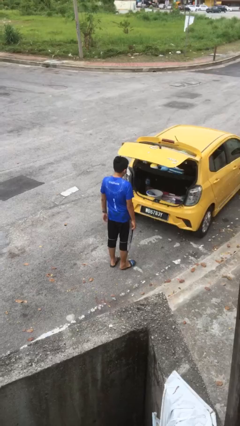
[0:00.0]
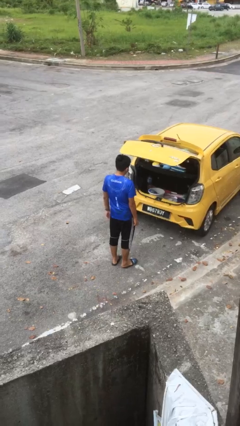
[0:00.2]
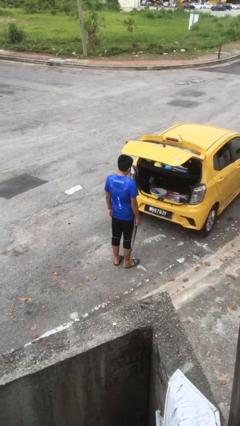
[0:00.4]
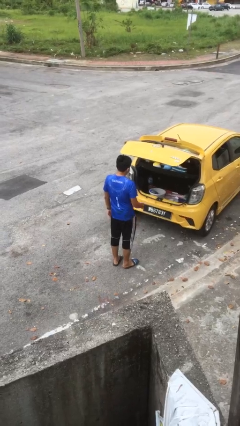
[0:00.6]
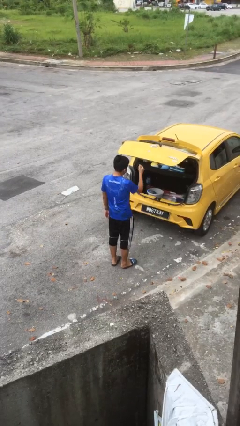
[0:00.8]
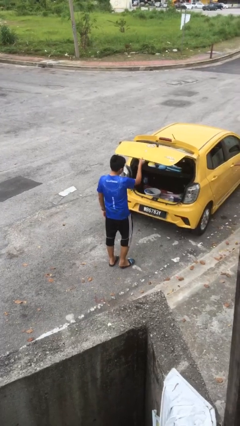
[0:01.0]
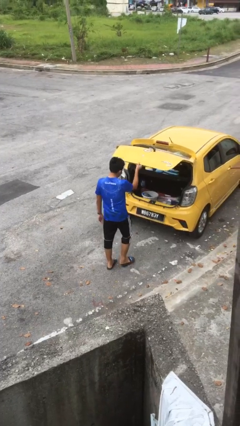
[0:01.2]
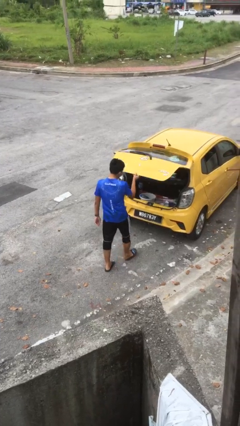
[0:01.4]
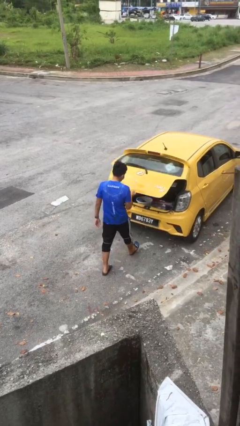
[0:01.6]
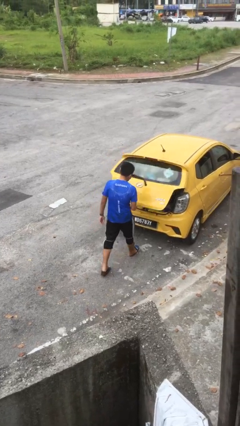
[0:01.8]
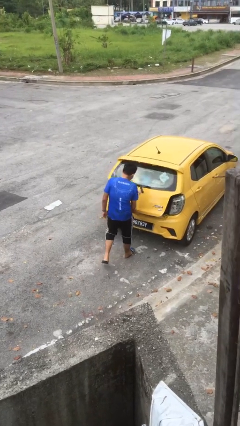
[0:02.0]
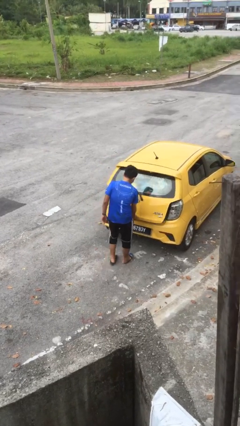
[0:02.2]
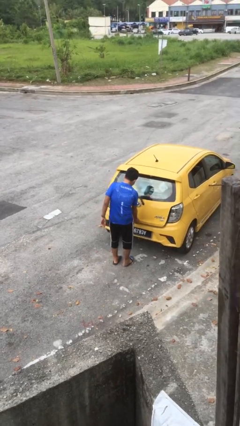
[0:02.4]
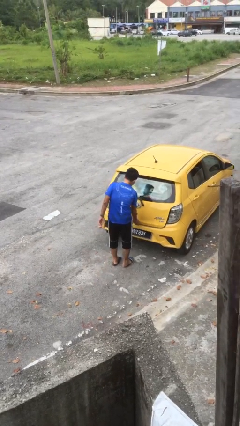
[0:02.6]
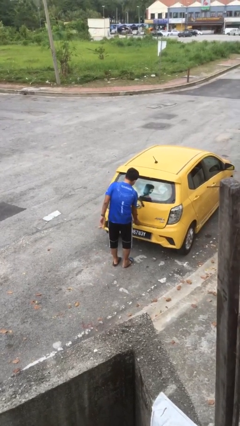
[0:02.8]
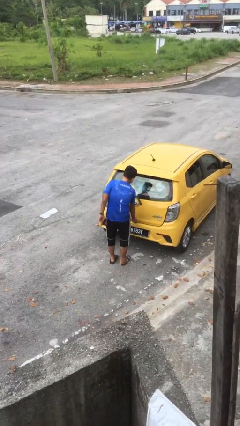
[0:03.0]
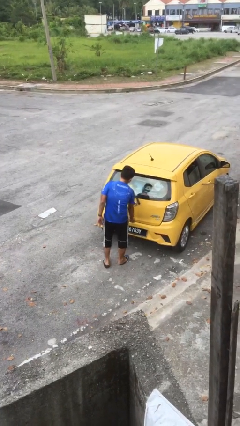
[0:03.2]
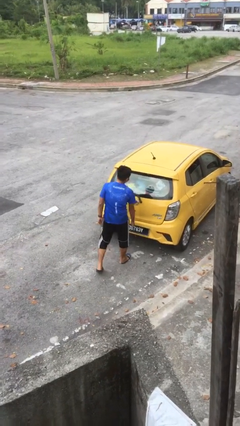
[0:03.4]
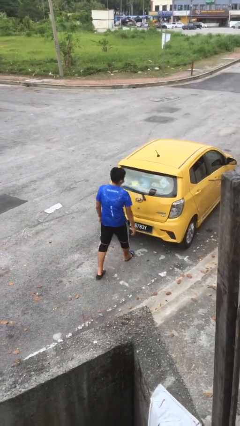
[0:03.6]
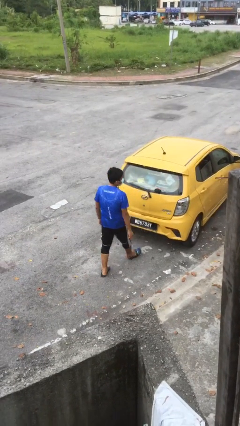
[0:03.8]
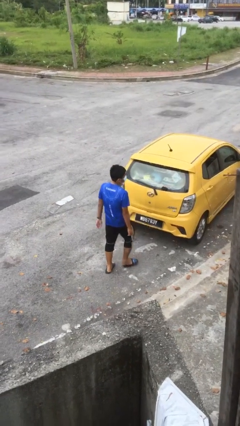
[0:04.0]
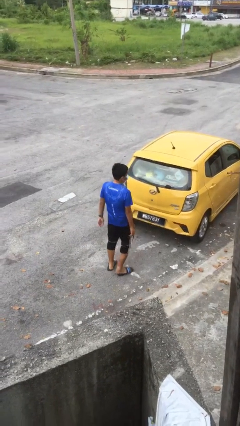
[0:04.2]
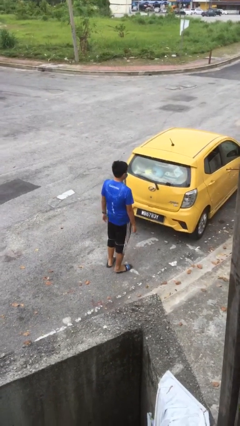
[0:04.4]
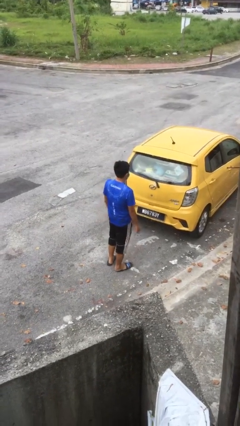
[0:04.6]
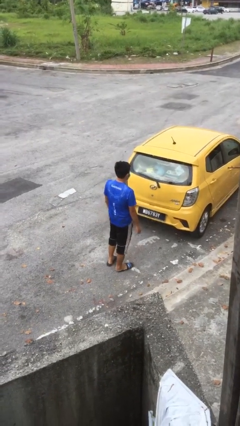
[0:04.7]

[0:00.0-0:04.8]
person closes car trunk

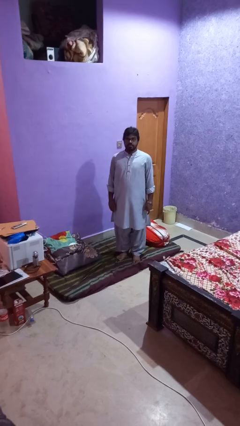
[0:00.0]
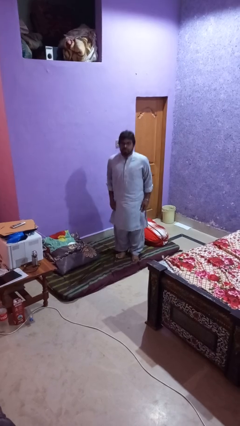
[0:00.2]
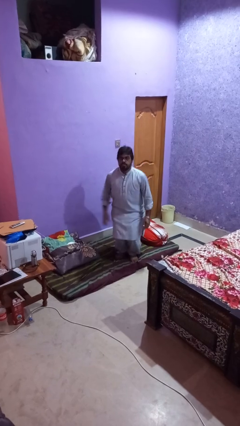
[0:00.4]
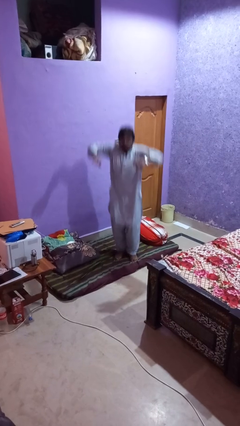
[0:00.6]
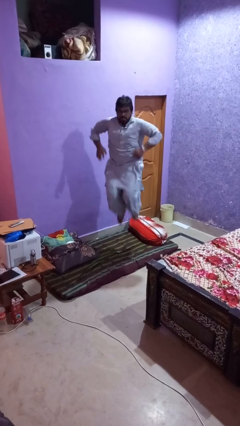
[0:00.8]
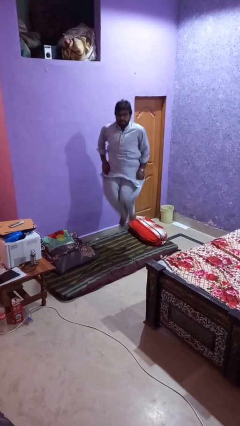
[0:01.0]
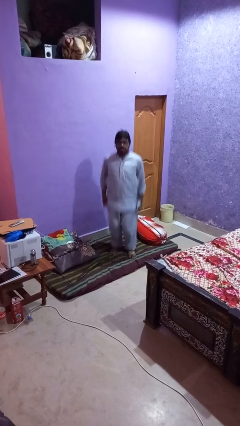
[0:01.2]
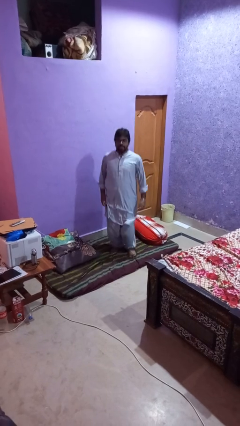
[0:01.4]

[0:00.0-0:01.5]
person jumps

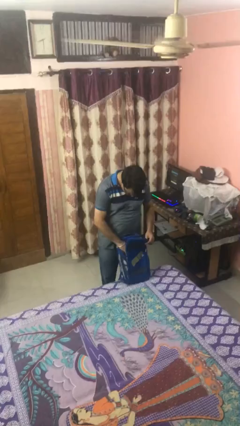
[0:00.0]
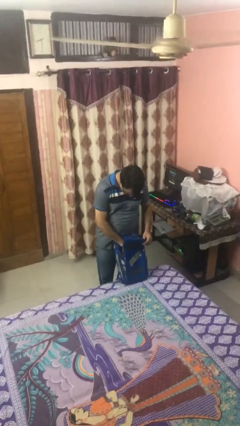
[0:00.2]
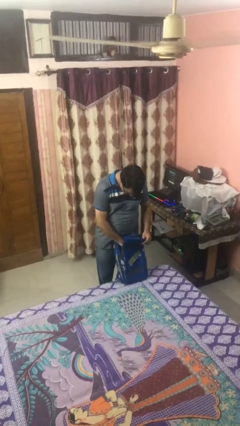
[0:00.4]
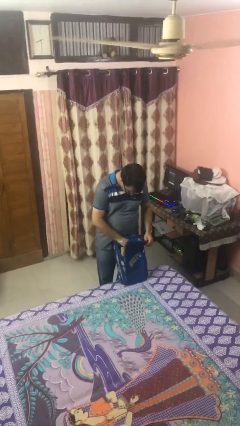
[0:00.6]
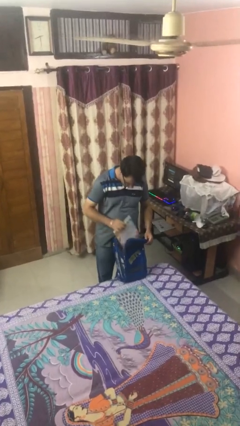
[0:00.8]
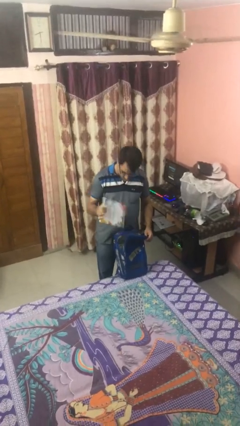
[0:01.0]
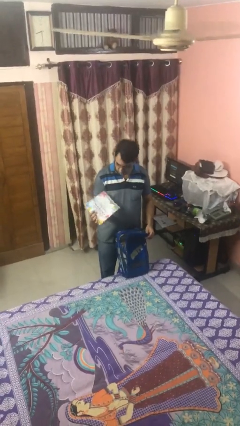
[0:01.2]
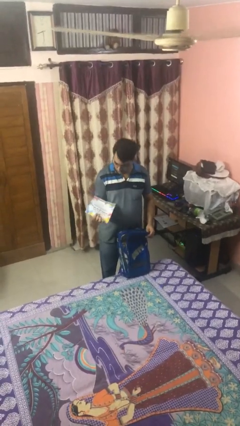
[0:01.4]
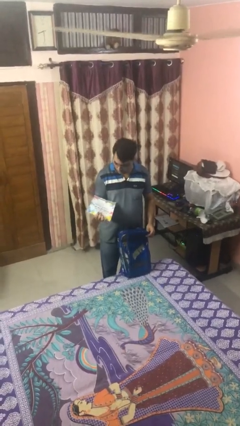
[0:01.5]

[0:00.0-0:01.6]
person takes object from backpack

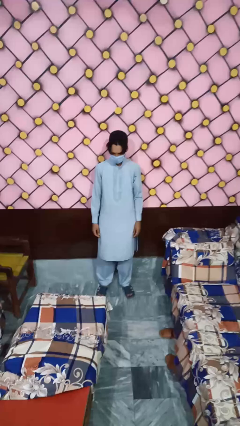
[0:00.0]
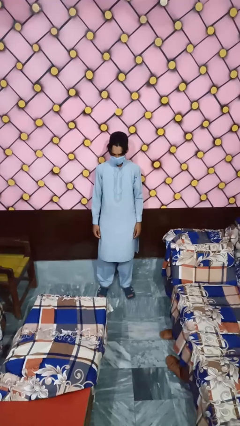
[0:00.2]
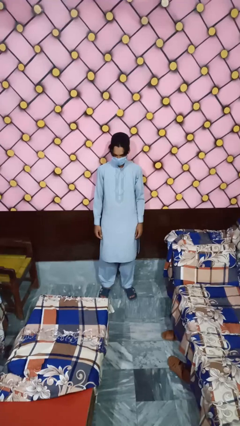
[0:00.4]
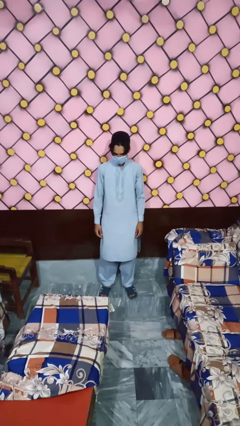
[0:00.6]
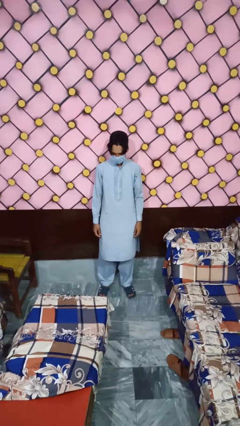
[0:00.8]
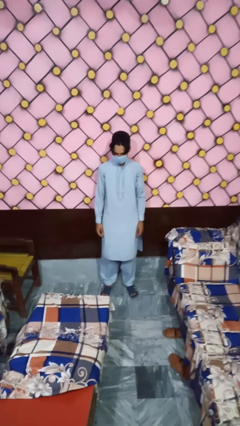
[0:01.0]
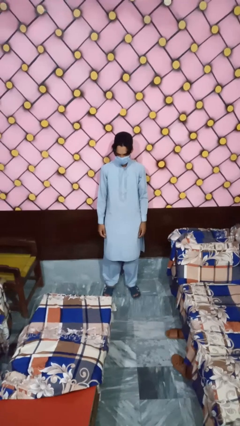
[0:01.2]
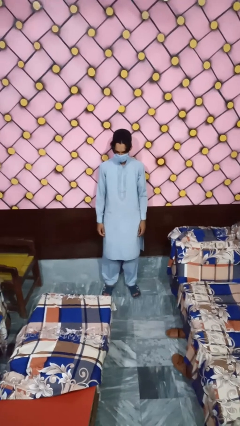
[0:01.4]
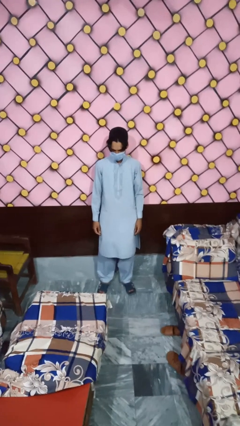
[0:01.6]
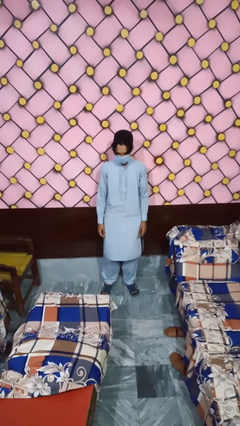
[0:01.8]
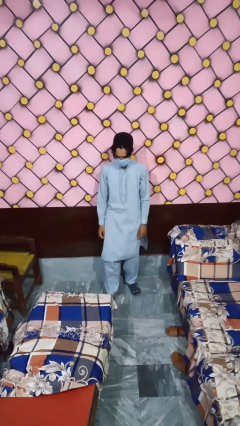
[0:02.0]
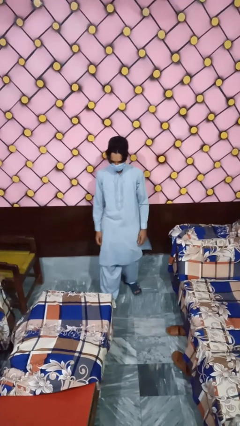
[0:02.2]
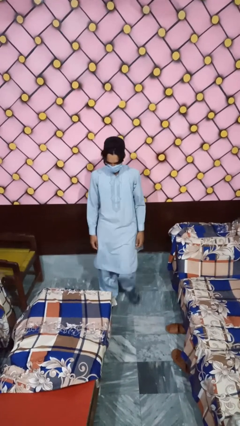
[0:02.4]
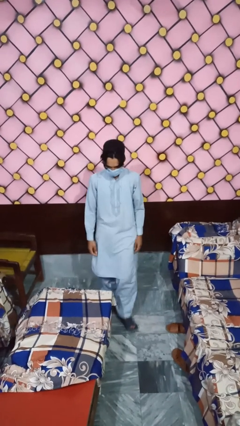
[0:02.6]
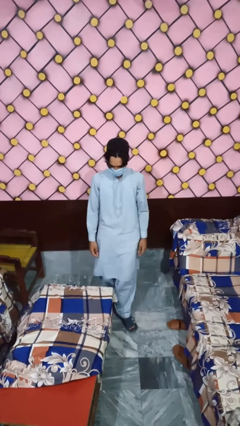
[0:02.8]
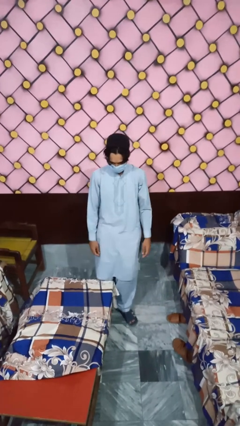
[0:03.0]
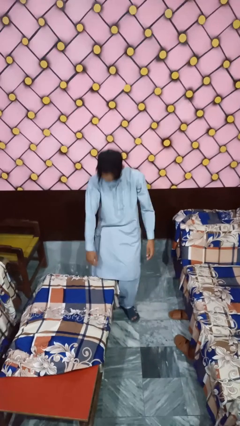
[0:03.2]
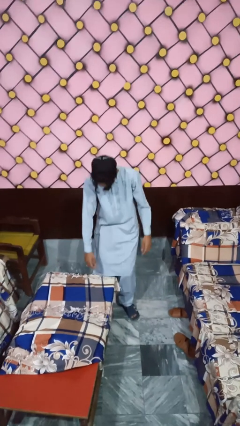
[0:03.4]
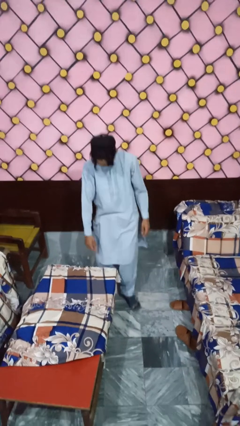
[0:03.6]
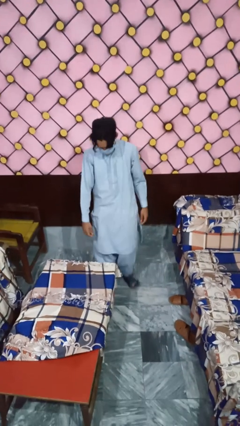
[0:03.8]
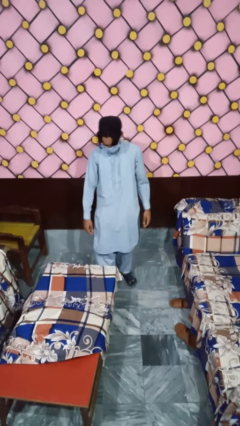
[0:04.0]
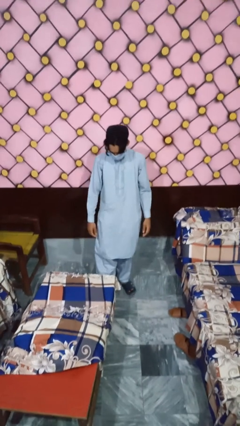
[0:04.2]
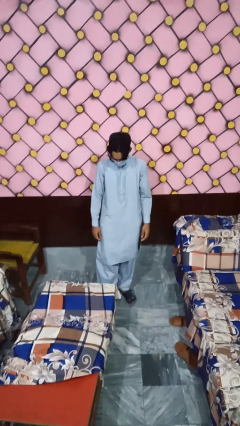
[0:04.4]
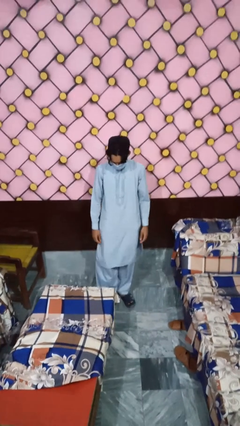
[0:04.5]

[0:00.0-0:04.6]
person bumps into table

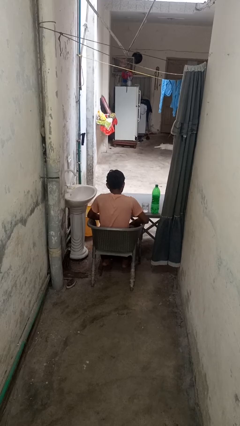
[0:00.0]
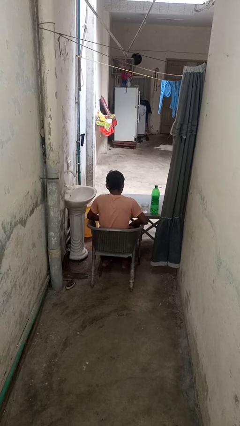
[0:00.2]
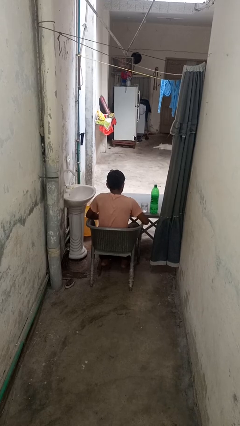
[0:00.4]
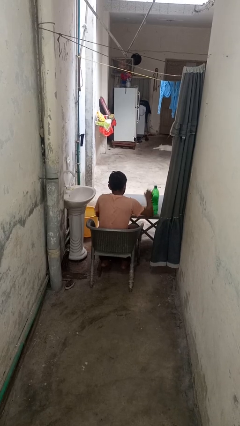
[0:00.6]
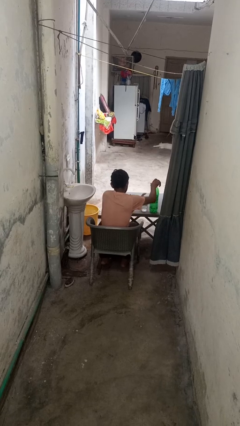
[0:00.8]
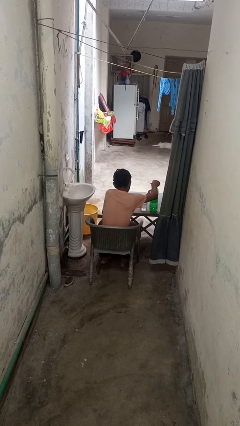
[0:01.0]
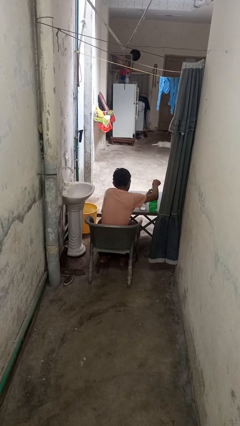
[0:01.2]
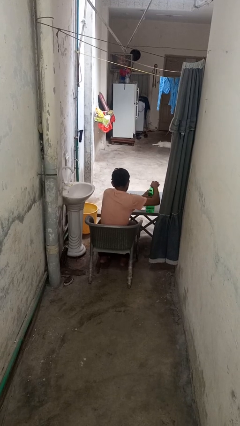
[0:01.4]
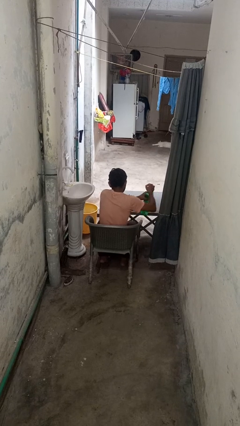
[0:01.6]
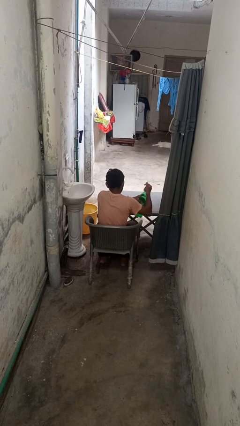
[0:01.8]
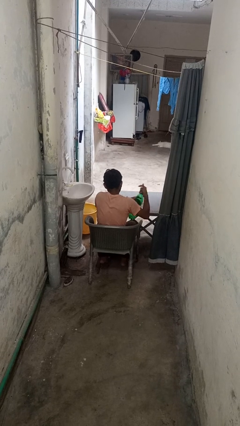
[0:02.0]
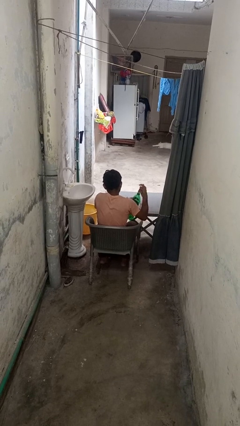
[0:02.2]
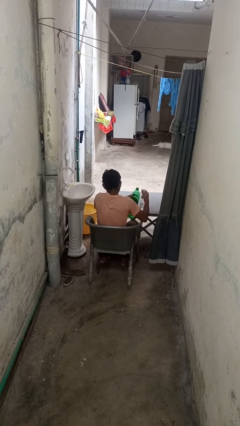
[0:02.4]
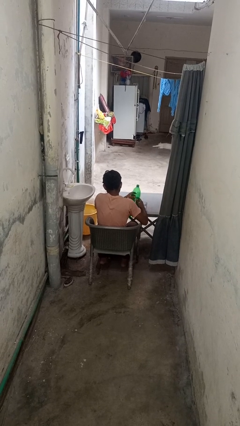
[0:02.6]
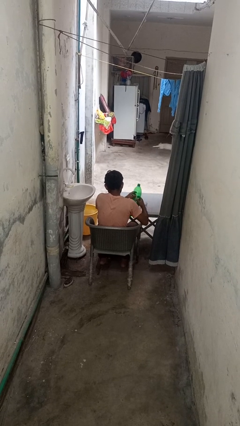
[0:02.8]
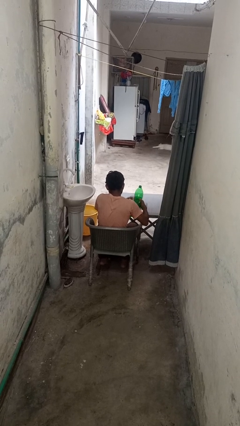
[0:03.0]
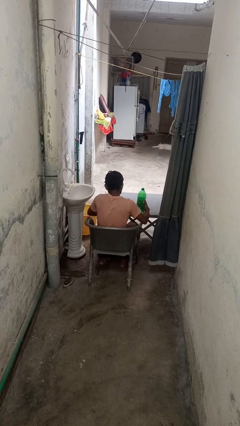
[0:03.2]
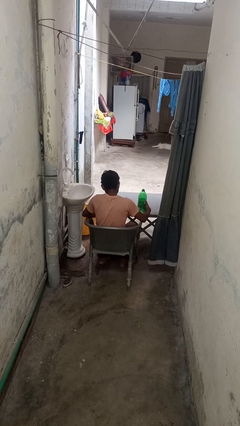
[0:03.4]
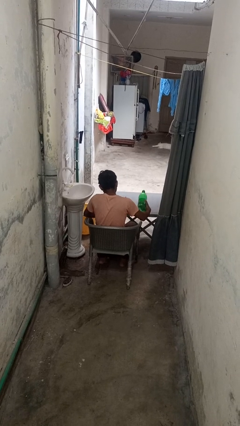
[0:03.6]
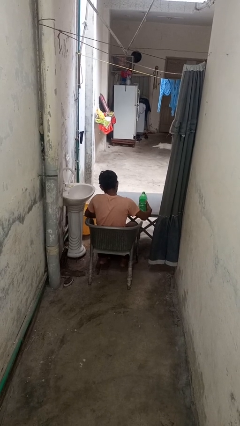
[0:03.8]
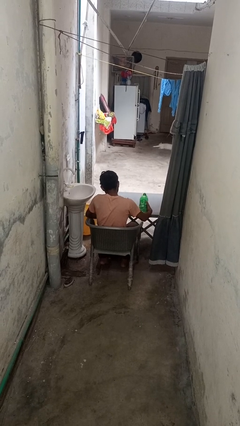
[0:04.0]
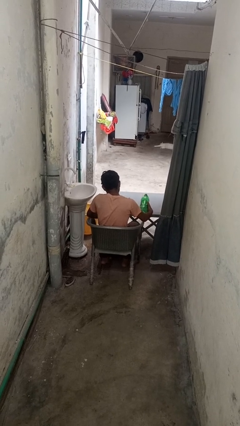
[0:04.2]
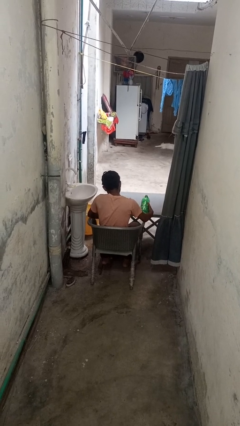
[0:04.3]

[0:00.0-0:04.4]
person unscrews lid from bottle

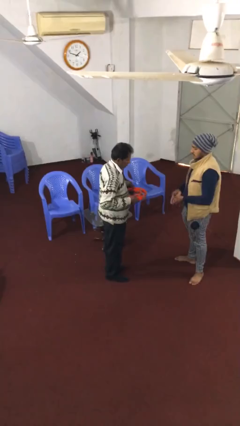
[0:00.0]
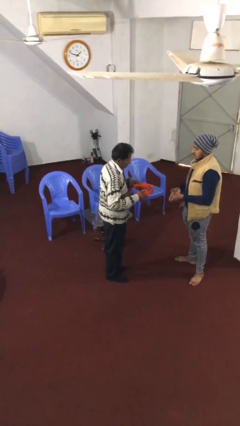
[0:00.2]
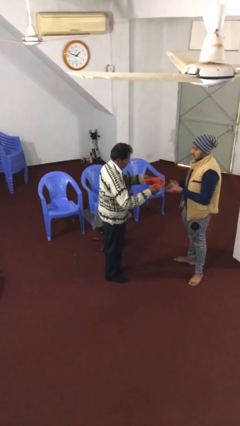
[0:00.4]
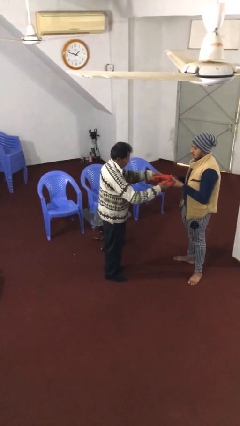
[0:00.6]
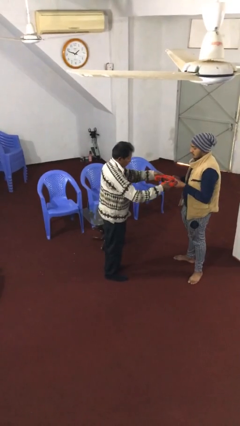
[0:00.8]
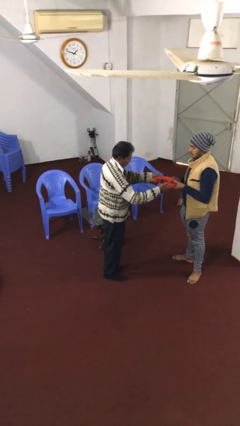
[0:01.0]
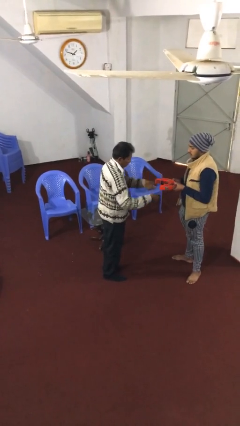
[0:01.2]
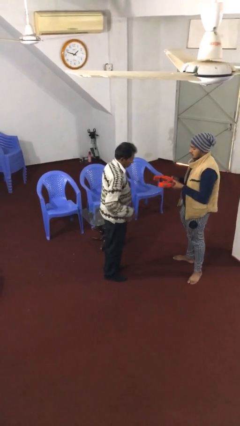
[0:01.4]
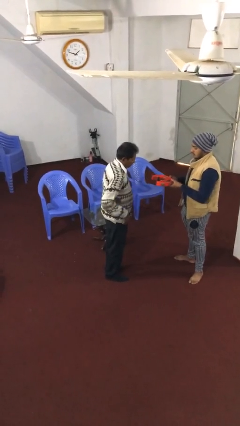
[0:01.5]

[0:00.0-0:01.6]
person transfers object to person
